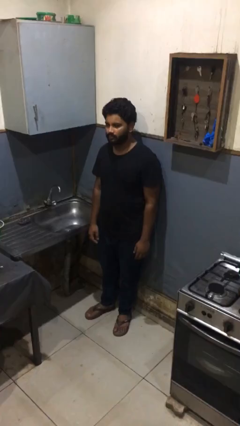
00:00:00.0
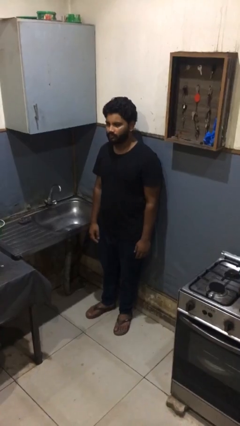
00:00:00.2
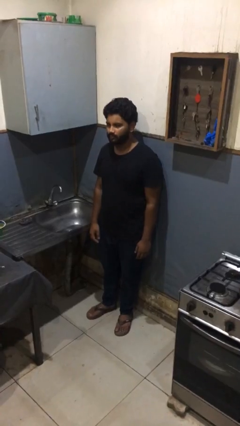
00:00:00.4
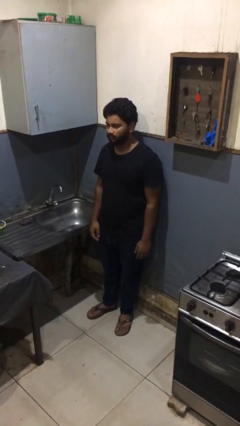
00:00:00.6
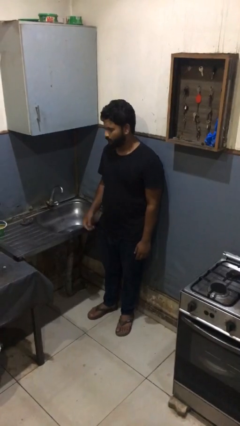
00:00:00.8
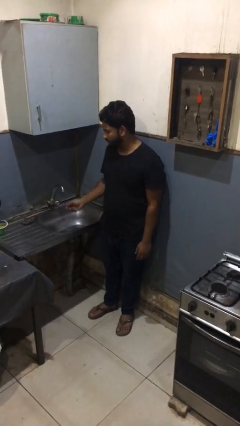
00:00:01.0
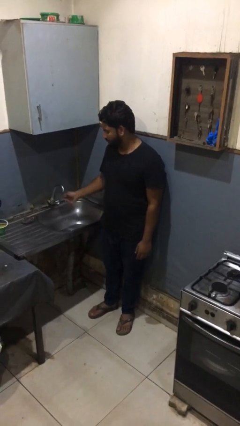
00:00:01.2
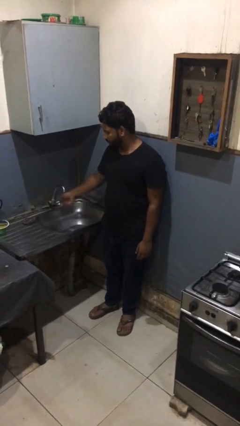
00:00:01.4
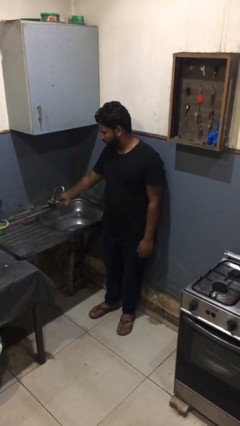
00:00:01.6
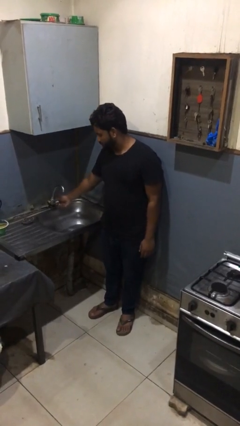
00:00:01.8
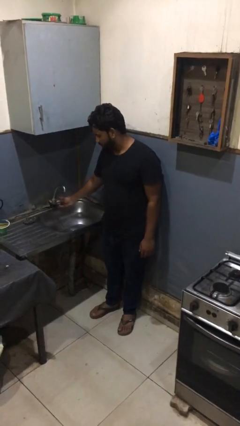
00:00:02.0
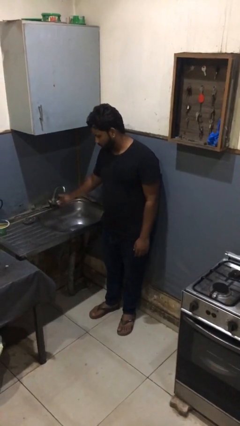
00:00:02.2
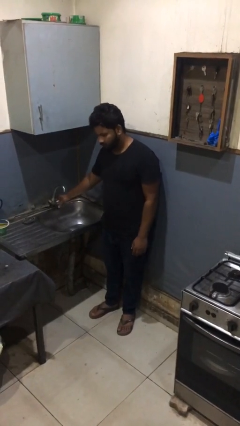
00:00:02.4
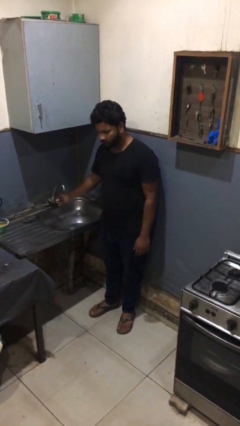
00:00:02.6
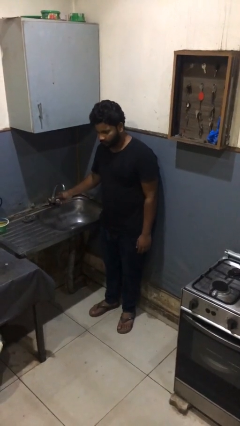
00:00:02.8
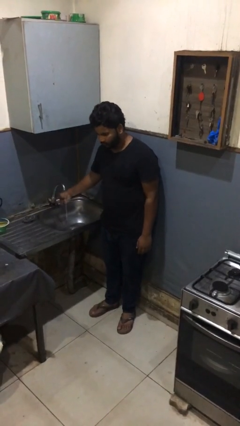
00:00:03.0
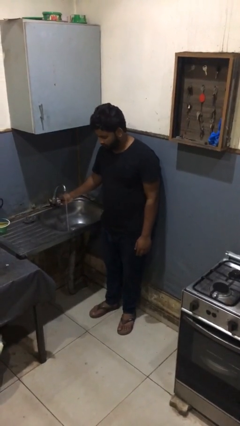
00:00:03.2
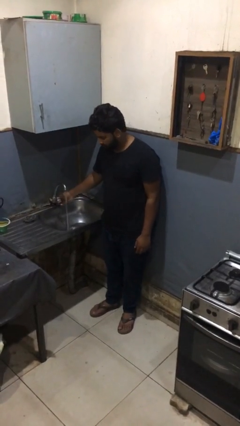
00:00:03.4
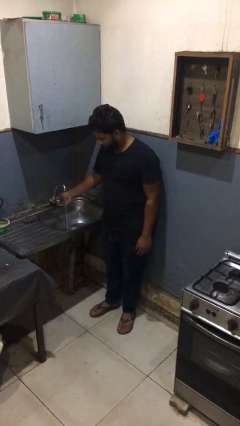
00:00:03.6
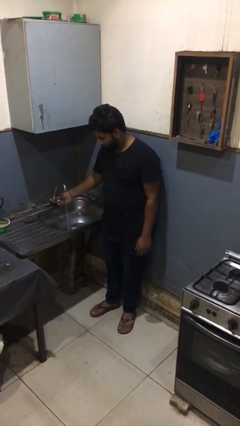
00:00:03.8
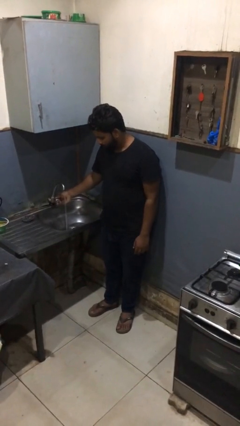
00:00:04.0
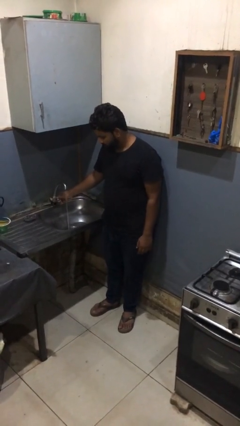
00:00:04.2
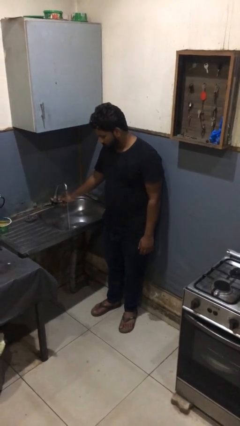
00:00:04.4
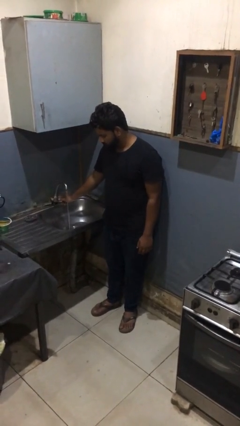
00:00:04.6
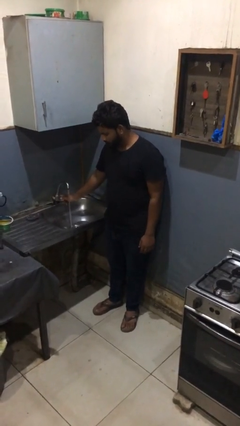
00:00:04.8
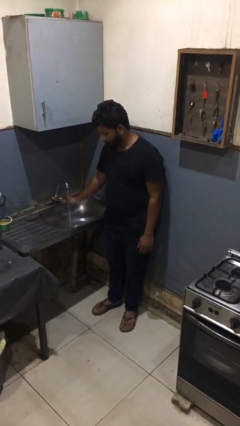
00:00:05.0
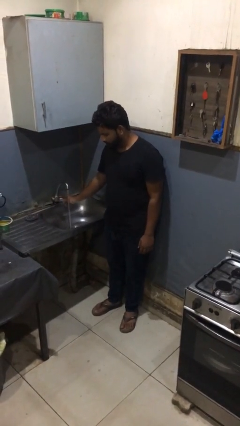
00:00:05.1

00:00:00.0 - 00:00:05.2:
person turns on faucet

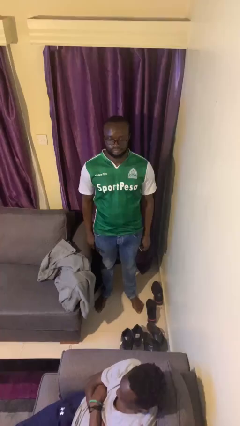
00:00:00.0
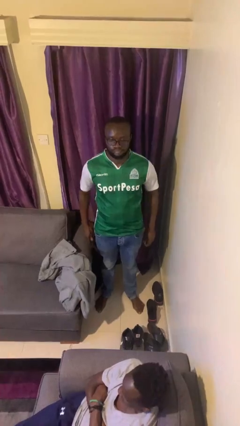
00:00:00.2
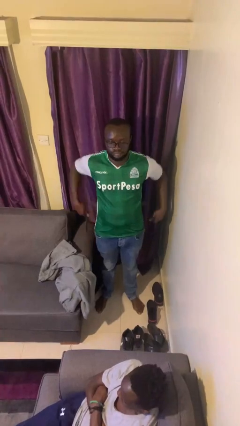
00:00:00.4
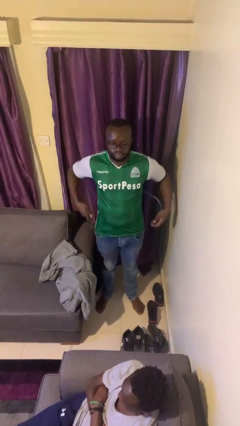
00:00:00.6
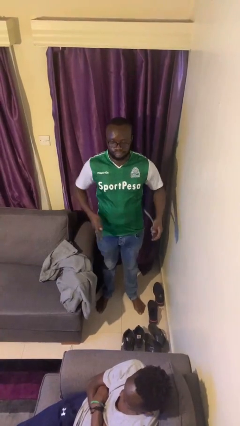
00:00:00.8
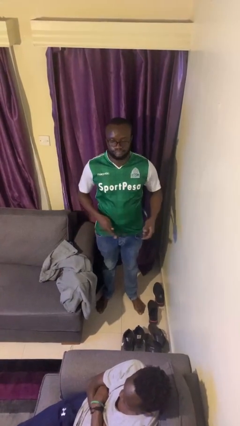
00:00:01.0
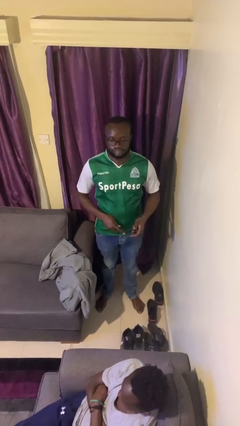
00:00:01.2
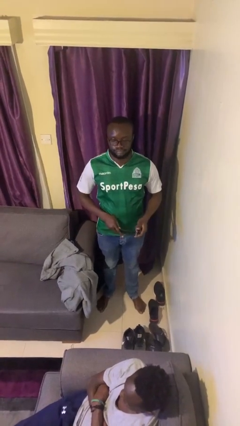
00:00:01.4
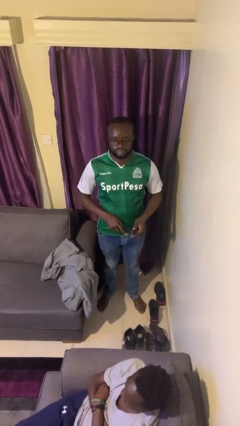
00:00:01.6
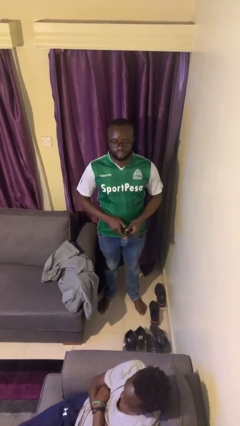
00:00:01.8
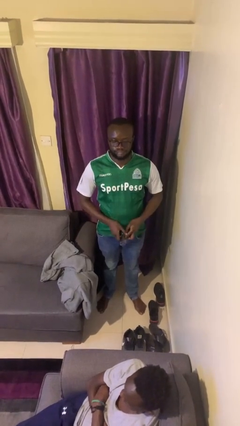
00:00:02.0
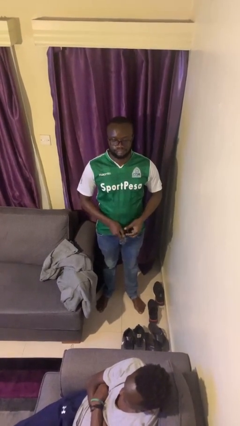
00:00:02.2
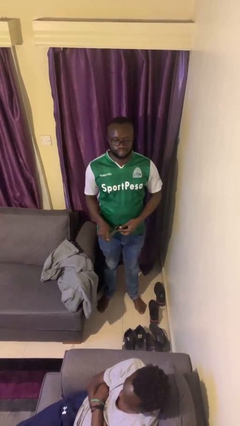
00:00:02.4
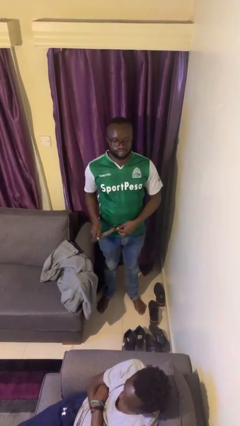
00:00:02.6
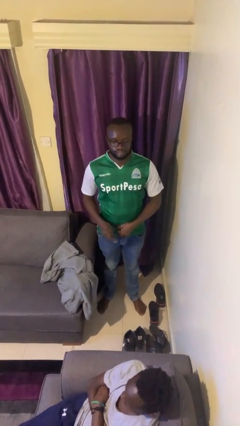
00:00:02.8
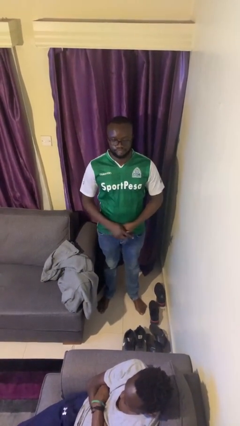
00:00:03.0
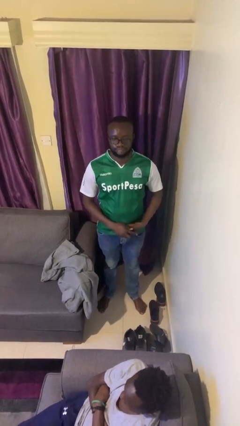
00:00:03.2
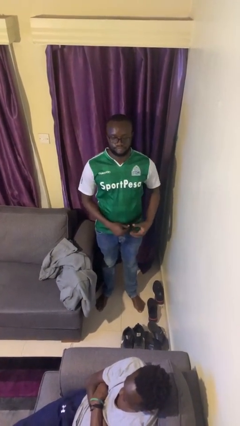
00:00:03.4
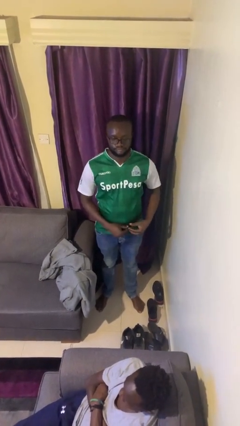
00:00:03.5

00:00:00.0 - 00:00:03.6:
person puts on belt

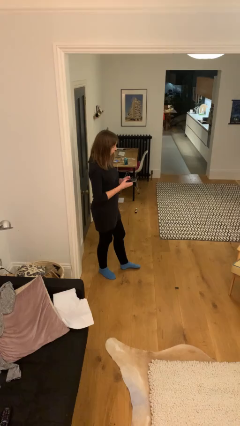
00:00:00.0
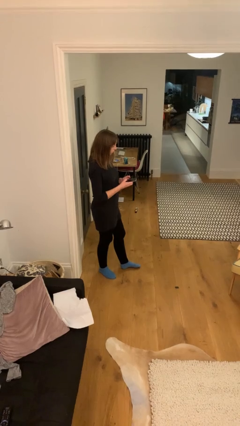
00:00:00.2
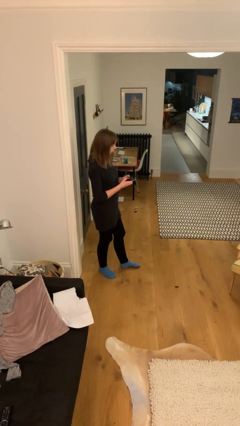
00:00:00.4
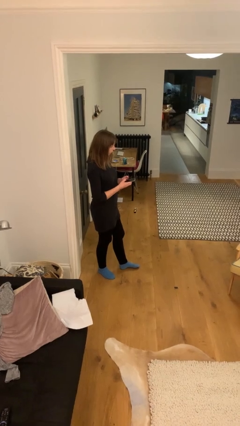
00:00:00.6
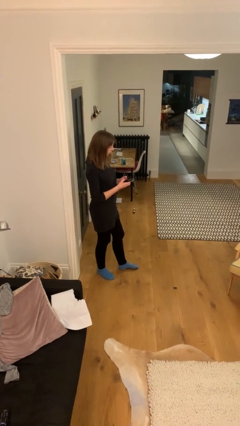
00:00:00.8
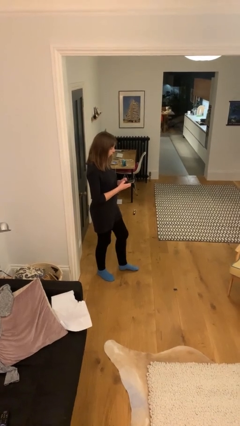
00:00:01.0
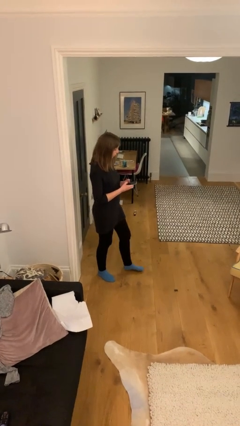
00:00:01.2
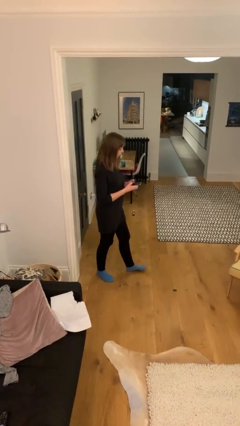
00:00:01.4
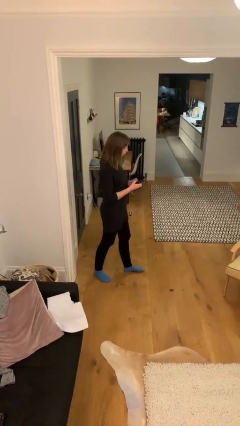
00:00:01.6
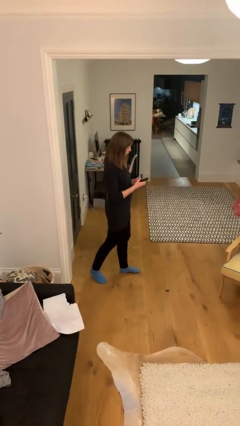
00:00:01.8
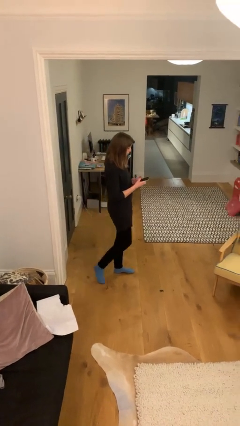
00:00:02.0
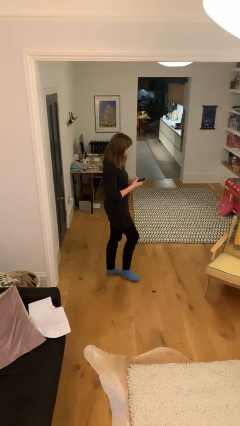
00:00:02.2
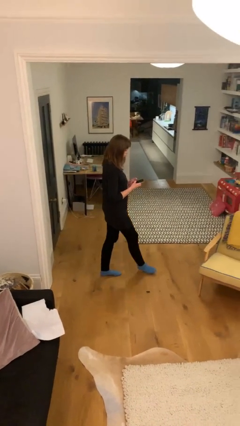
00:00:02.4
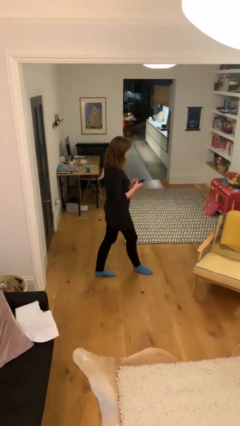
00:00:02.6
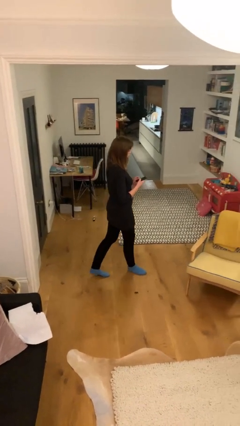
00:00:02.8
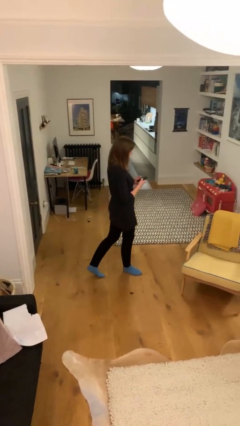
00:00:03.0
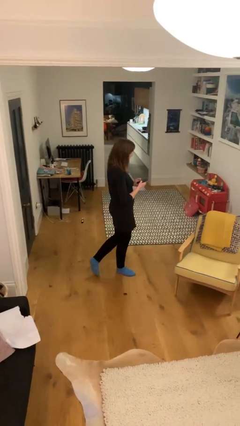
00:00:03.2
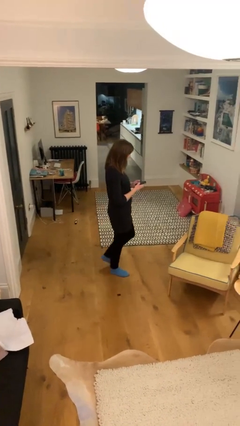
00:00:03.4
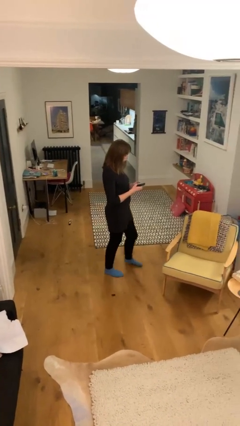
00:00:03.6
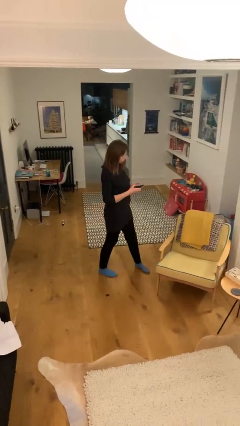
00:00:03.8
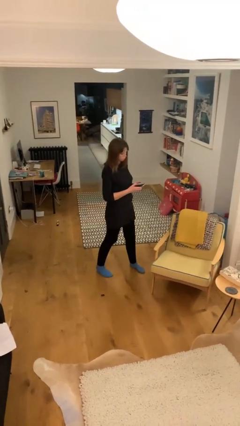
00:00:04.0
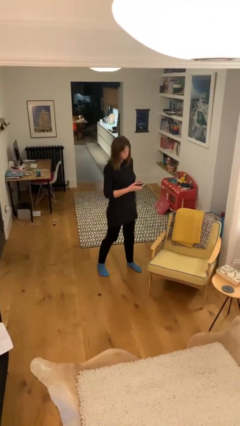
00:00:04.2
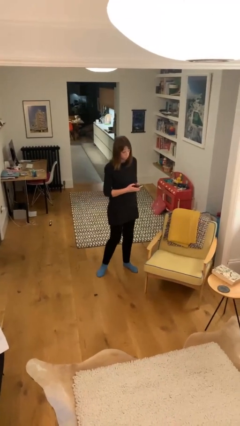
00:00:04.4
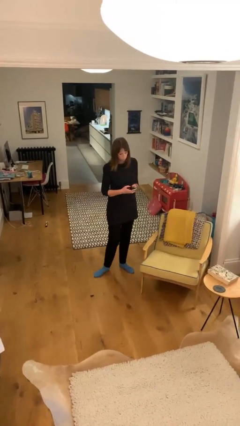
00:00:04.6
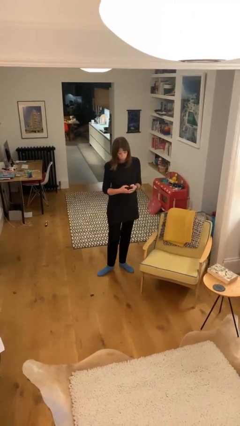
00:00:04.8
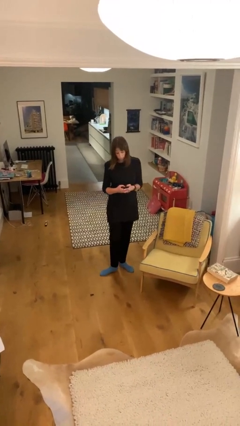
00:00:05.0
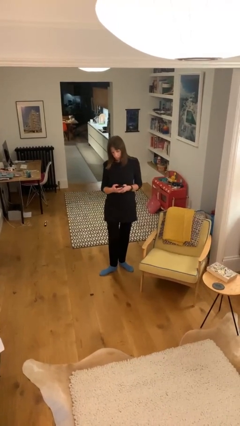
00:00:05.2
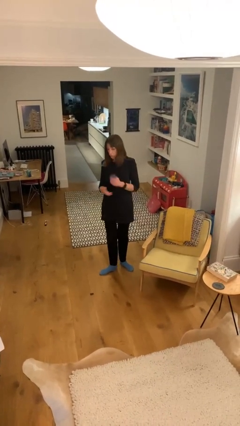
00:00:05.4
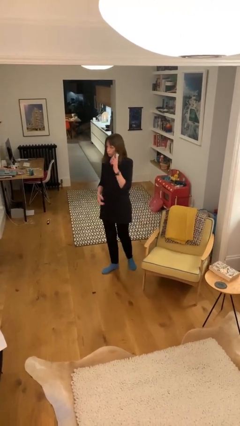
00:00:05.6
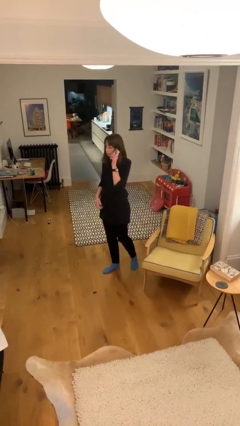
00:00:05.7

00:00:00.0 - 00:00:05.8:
person texts on phone

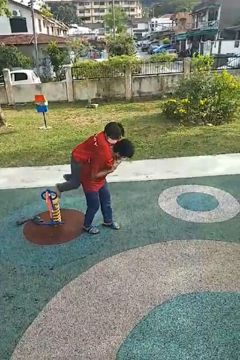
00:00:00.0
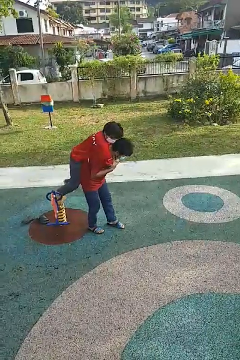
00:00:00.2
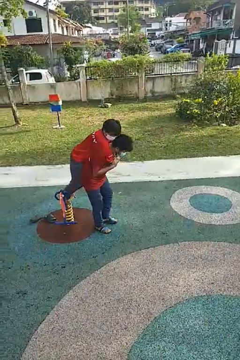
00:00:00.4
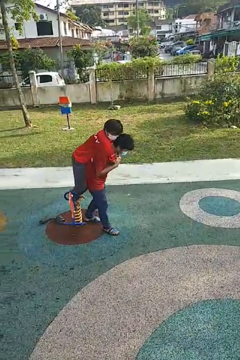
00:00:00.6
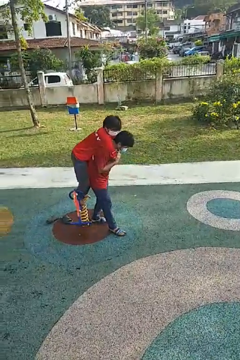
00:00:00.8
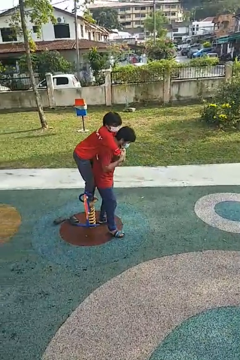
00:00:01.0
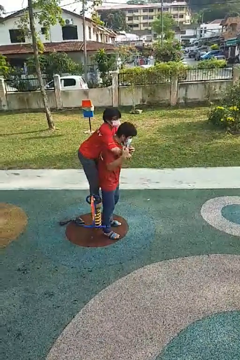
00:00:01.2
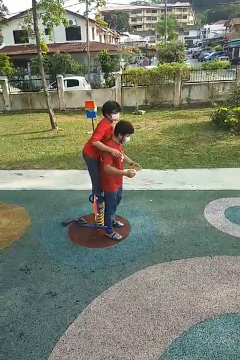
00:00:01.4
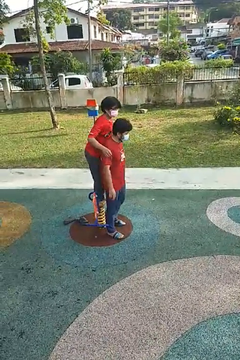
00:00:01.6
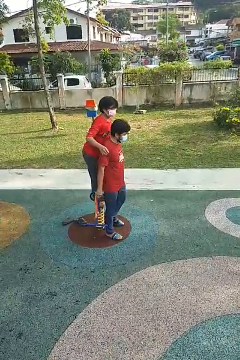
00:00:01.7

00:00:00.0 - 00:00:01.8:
person puts down person

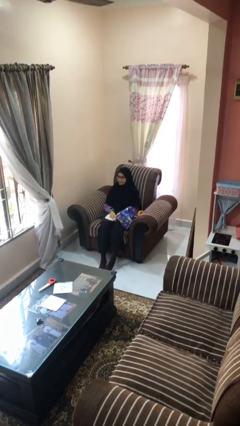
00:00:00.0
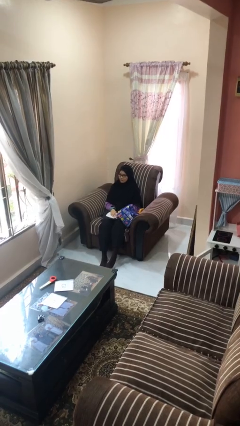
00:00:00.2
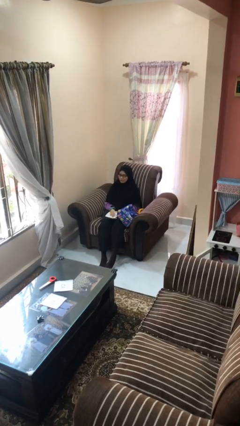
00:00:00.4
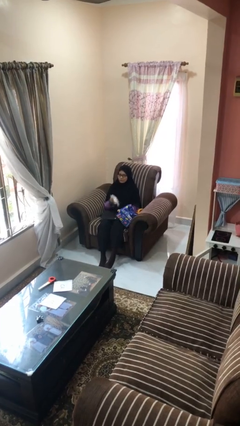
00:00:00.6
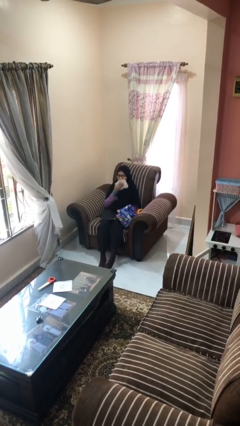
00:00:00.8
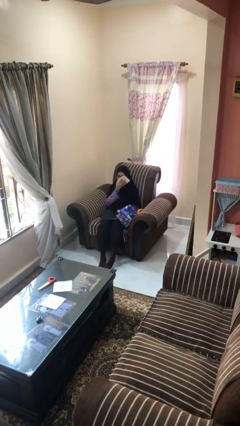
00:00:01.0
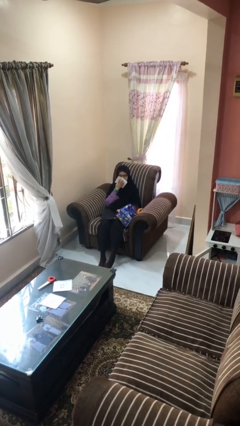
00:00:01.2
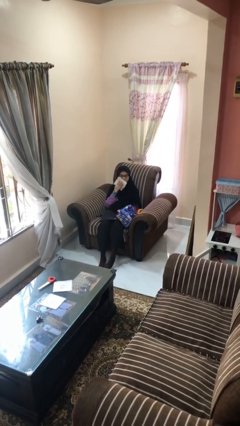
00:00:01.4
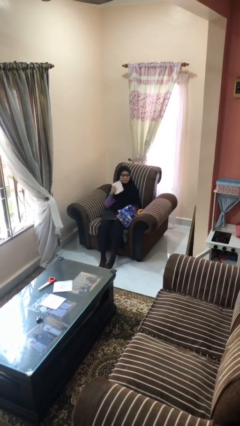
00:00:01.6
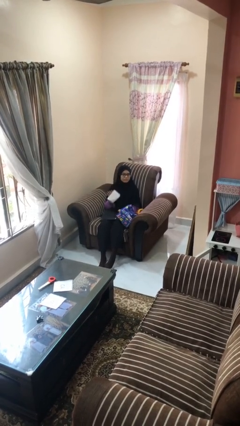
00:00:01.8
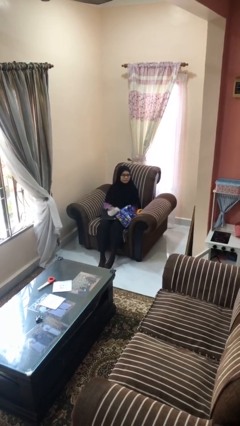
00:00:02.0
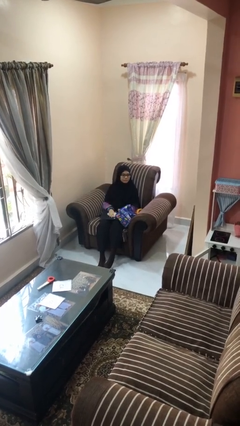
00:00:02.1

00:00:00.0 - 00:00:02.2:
person wipes mouth with napkin
